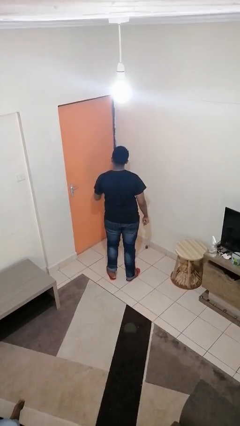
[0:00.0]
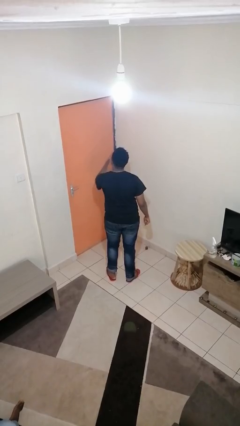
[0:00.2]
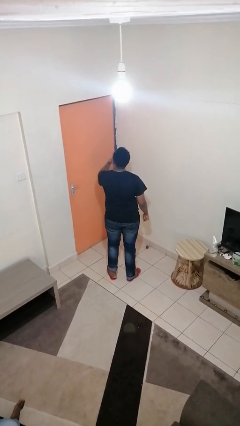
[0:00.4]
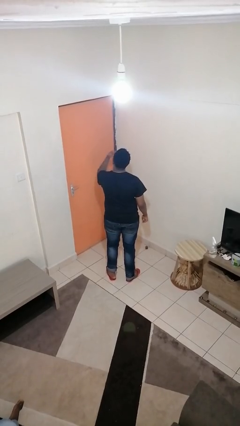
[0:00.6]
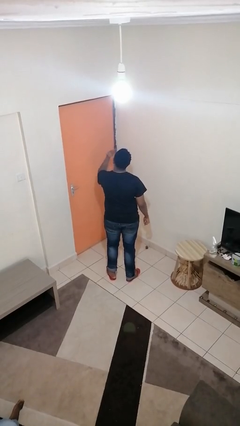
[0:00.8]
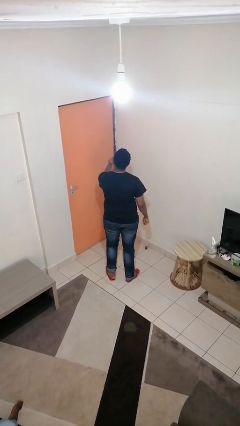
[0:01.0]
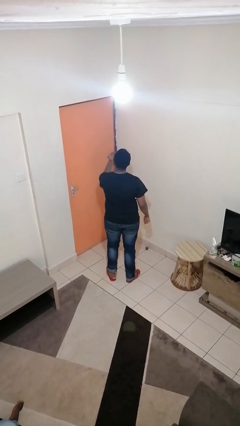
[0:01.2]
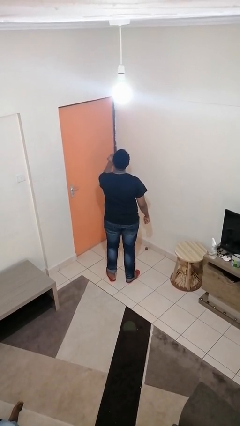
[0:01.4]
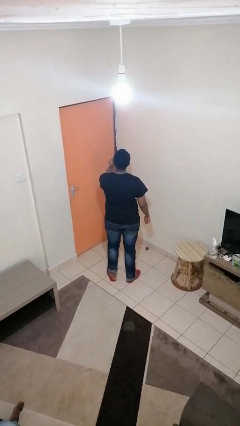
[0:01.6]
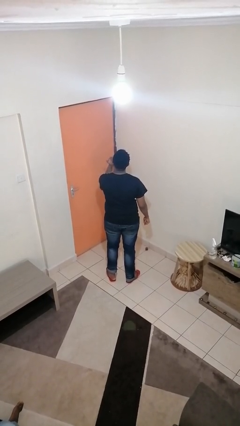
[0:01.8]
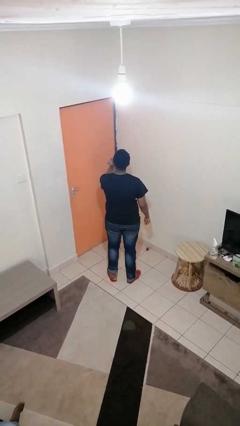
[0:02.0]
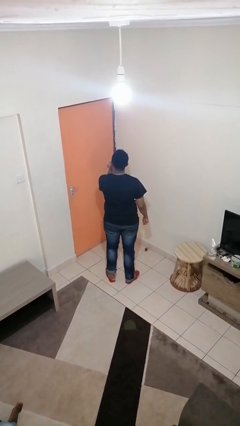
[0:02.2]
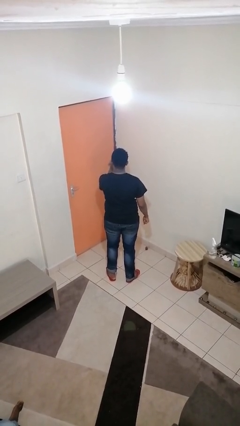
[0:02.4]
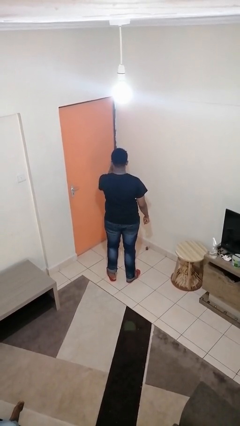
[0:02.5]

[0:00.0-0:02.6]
person licks fingers

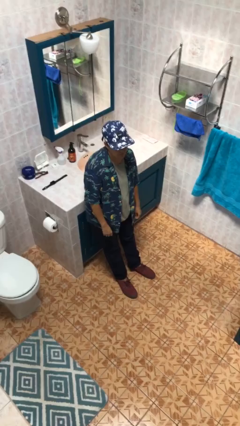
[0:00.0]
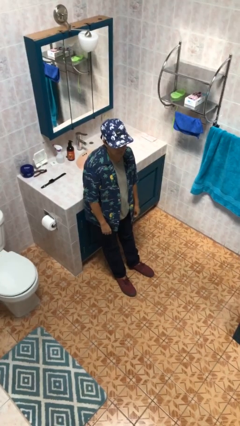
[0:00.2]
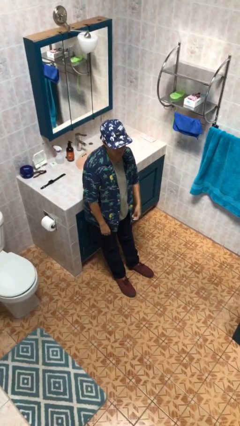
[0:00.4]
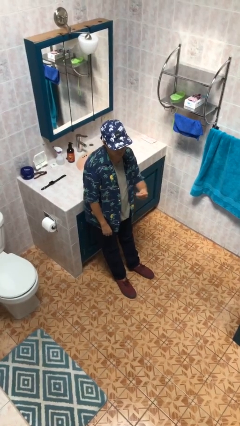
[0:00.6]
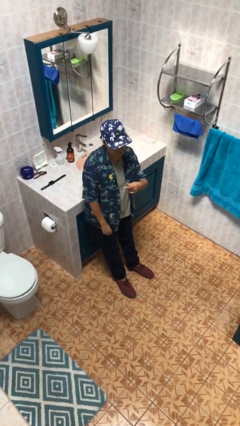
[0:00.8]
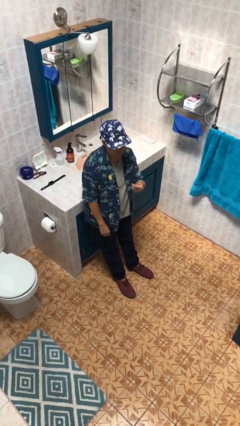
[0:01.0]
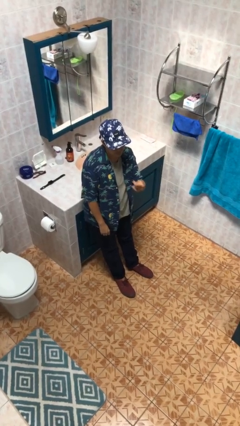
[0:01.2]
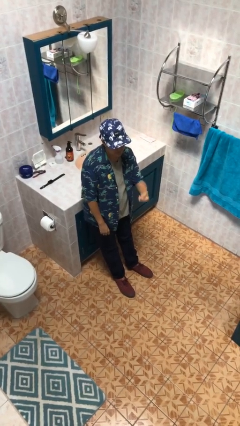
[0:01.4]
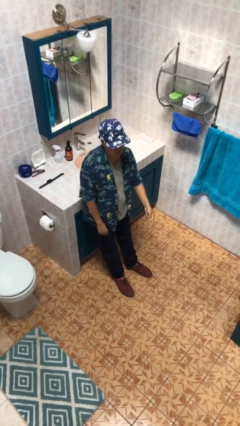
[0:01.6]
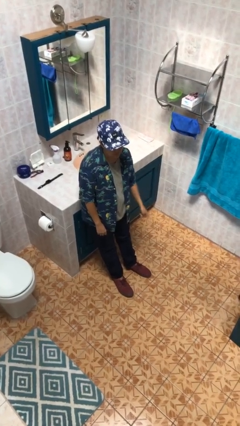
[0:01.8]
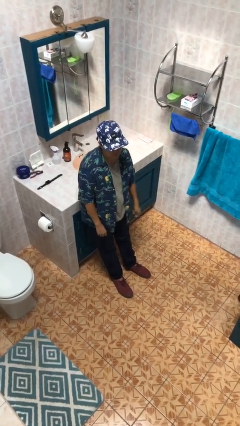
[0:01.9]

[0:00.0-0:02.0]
person snaps fingers

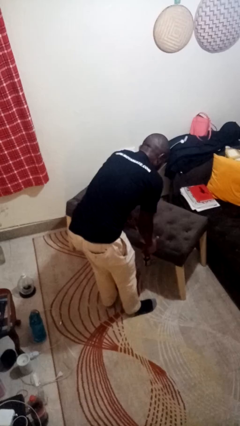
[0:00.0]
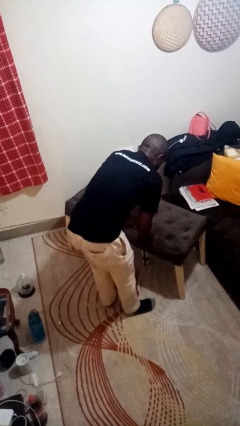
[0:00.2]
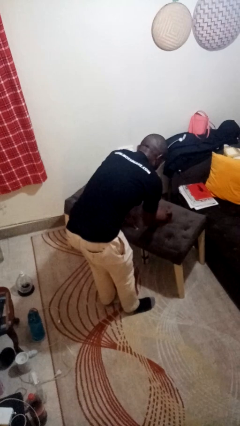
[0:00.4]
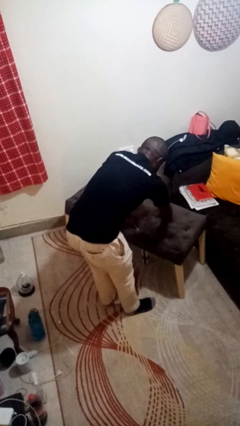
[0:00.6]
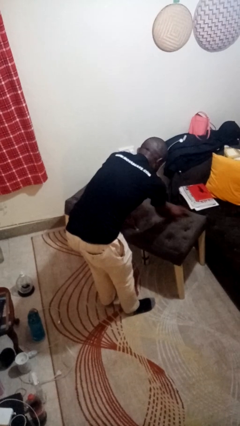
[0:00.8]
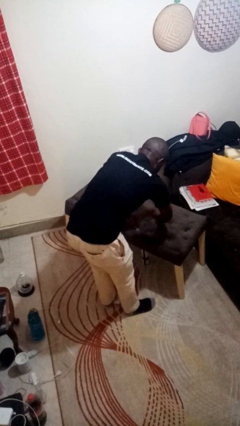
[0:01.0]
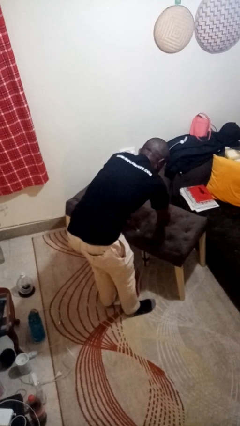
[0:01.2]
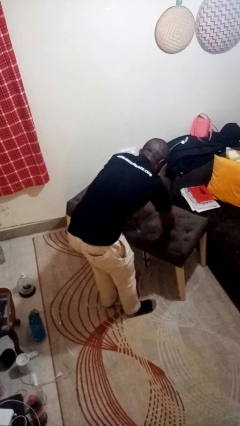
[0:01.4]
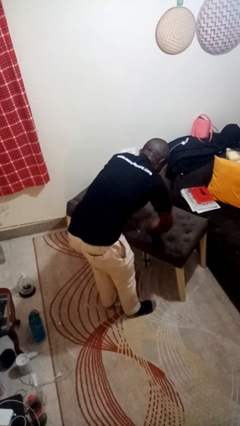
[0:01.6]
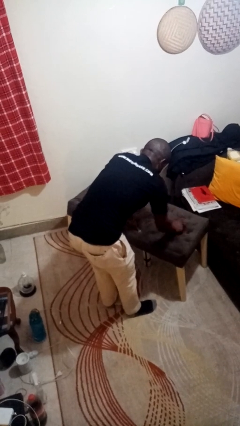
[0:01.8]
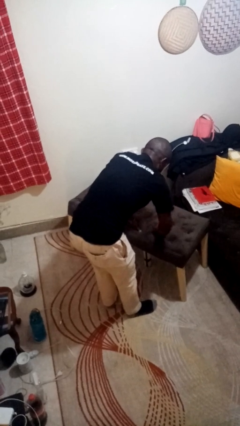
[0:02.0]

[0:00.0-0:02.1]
person cleans table with rag

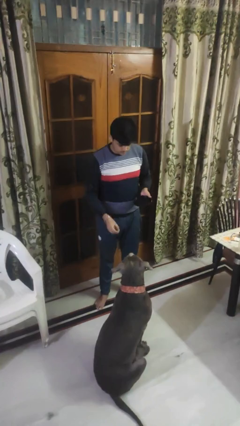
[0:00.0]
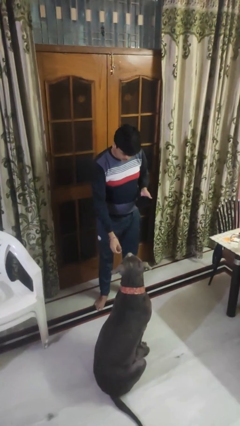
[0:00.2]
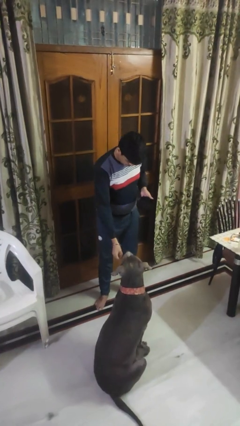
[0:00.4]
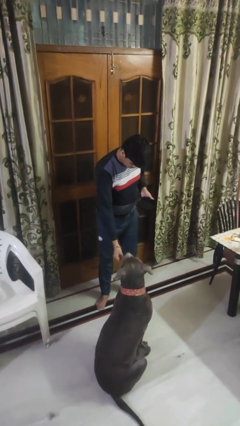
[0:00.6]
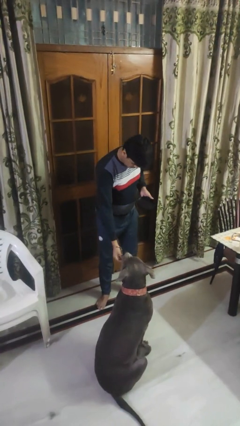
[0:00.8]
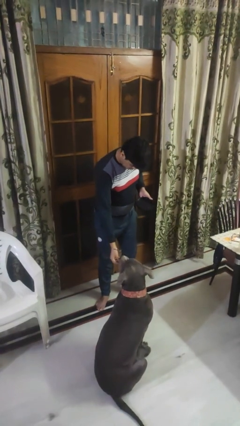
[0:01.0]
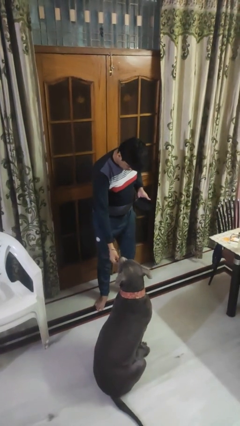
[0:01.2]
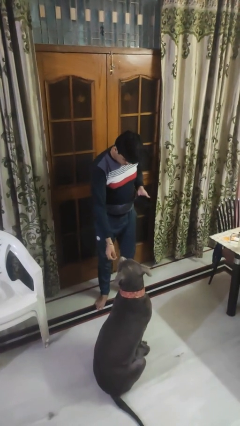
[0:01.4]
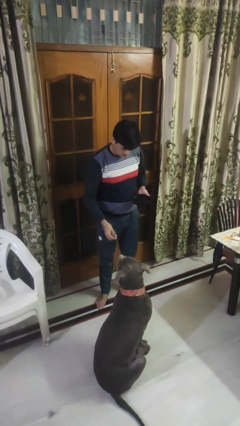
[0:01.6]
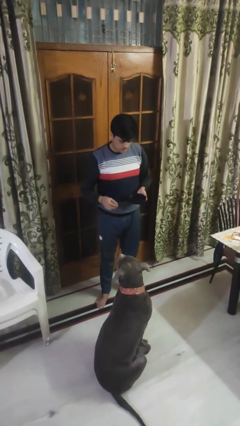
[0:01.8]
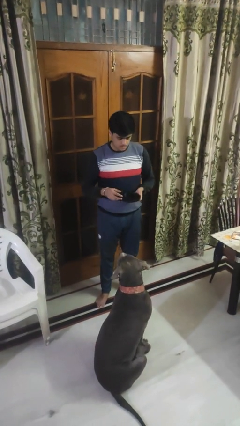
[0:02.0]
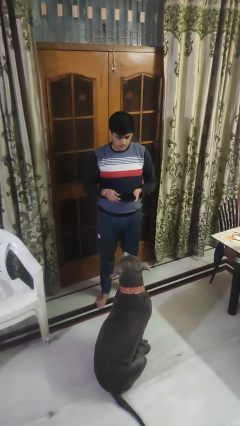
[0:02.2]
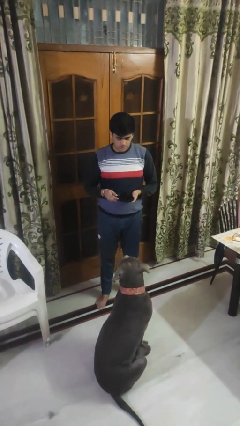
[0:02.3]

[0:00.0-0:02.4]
person feeds dog

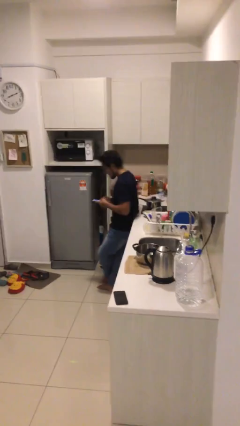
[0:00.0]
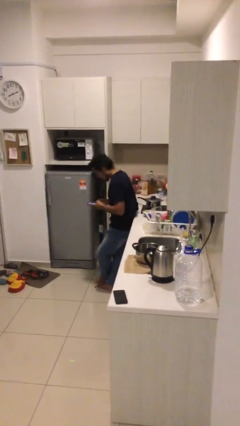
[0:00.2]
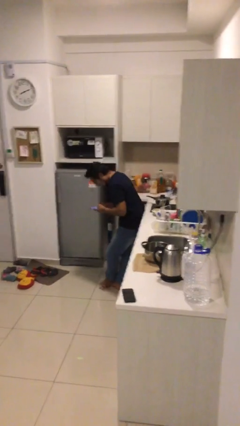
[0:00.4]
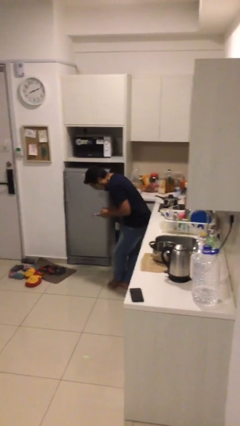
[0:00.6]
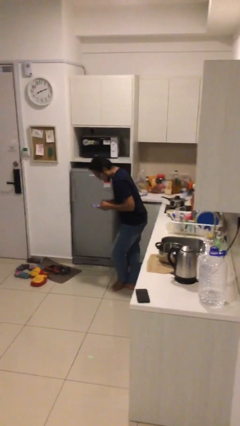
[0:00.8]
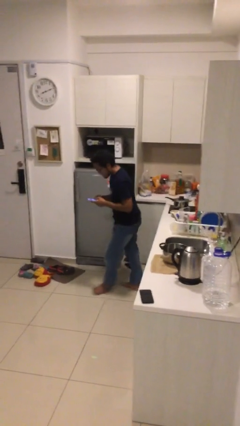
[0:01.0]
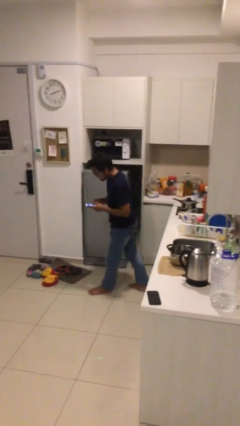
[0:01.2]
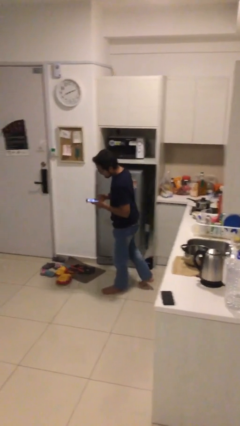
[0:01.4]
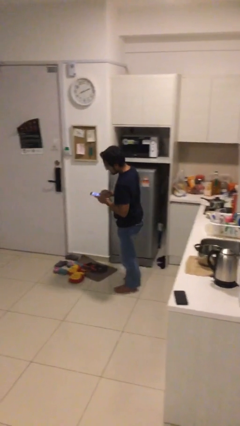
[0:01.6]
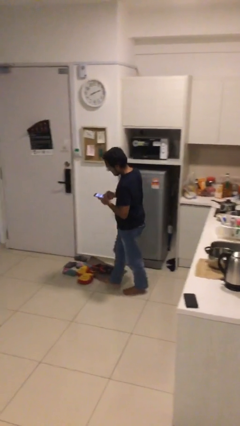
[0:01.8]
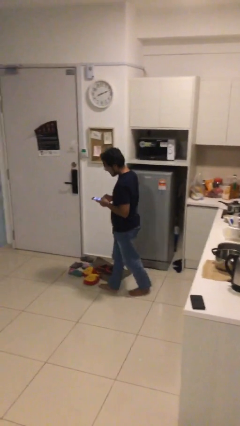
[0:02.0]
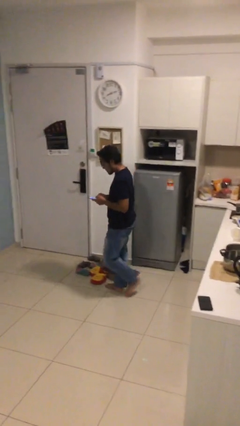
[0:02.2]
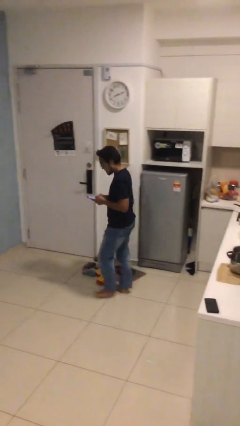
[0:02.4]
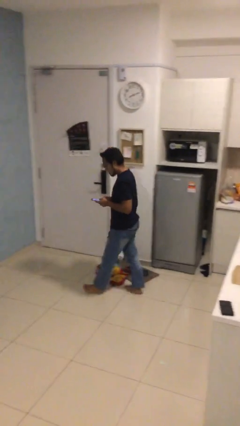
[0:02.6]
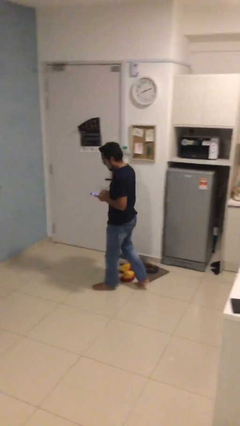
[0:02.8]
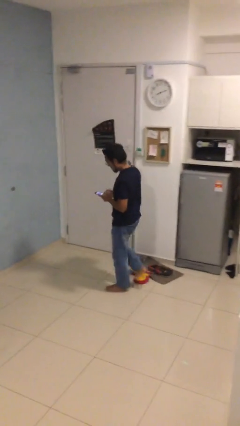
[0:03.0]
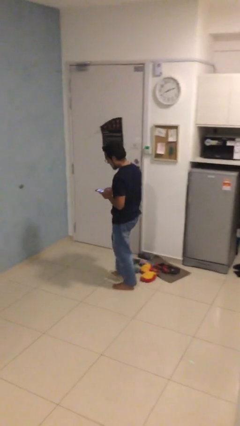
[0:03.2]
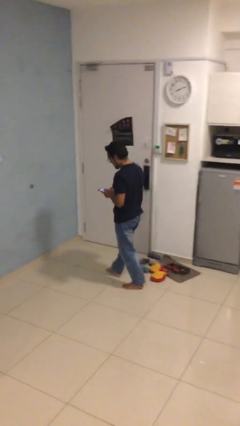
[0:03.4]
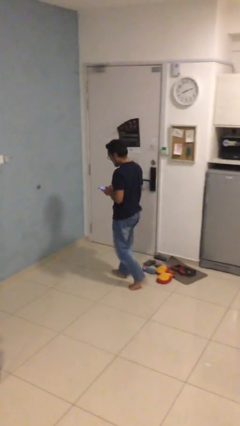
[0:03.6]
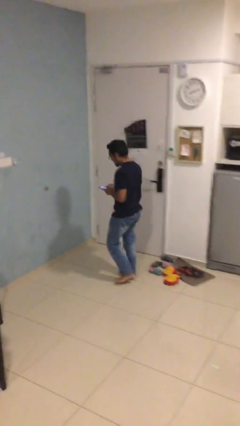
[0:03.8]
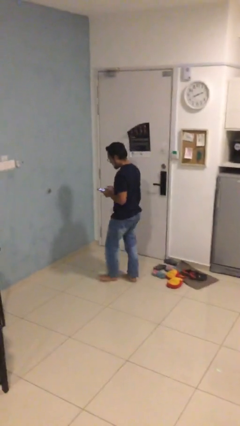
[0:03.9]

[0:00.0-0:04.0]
person texts on phone

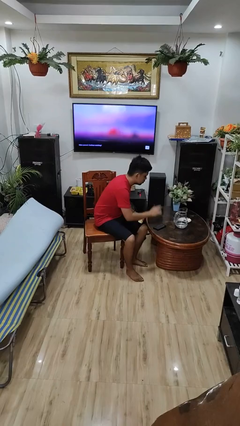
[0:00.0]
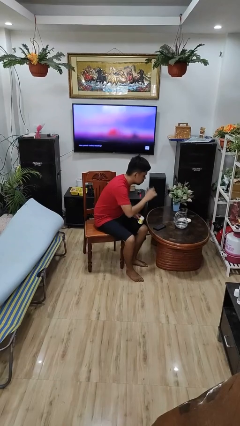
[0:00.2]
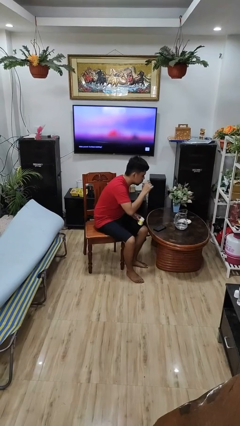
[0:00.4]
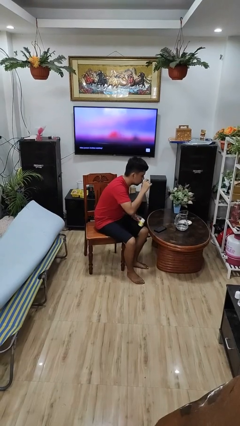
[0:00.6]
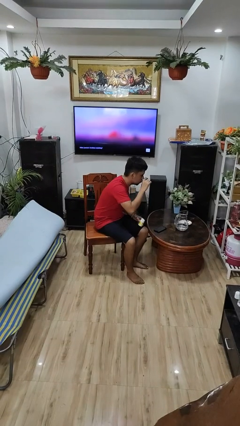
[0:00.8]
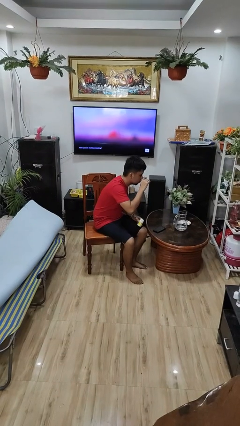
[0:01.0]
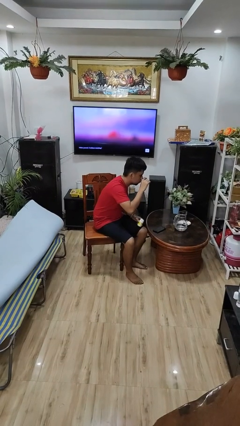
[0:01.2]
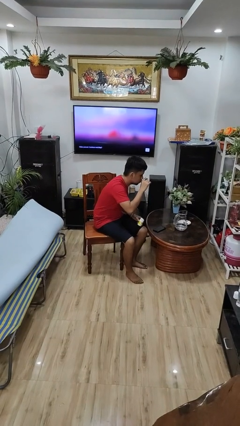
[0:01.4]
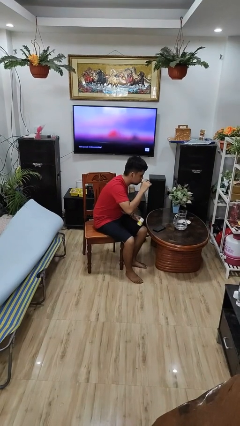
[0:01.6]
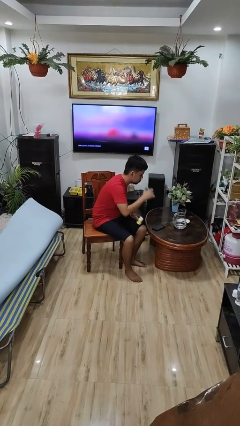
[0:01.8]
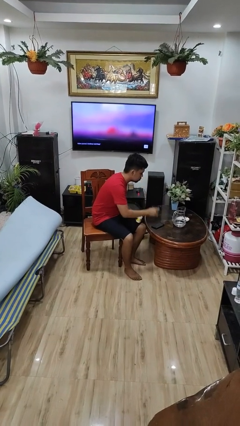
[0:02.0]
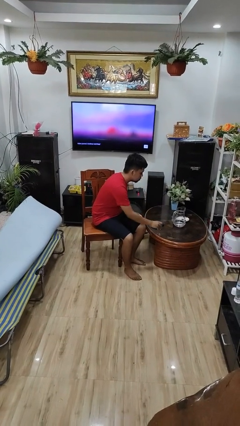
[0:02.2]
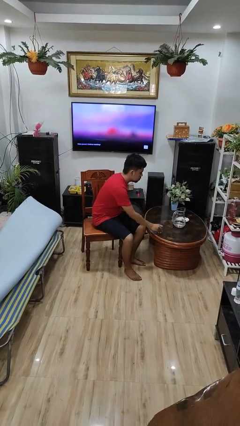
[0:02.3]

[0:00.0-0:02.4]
person drinks from cup

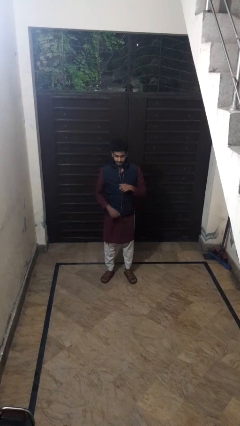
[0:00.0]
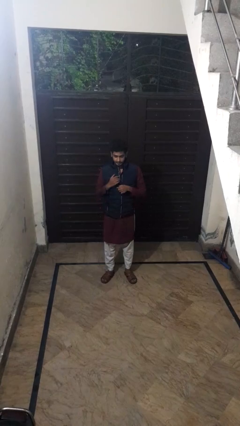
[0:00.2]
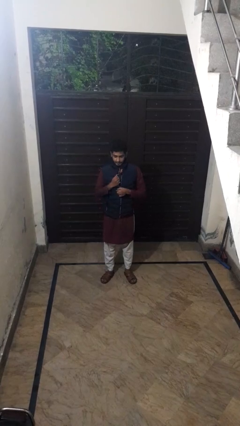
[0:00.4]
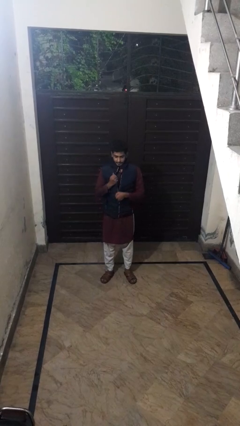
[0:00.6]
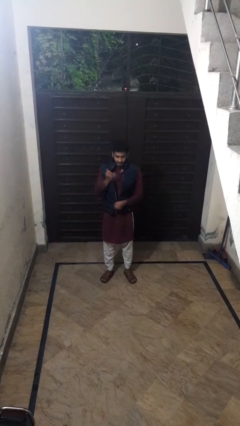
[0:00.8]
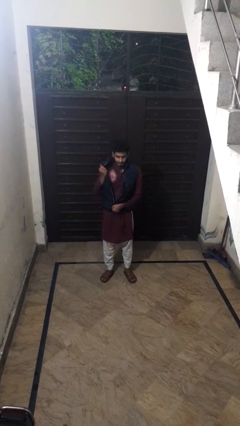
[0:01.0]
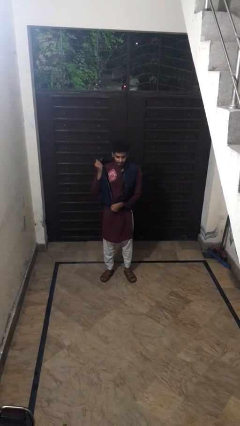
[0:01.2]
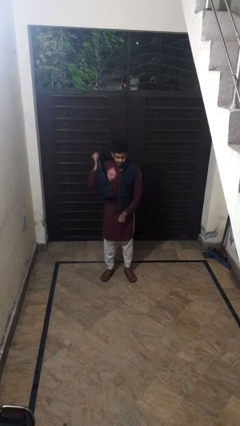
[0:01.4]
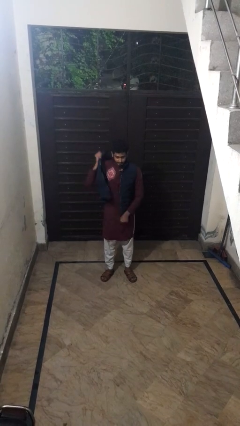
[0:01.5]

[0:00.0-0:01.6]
person unzips jacket
